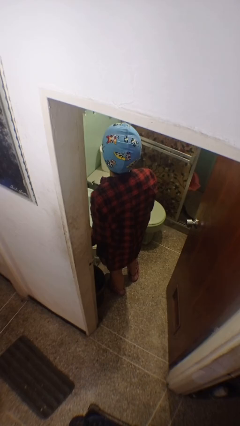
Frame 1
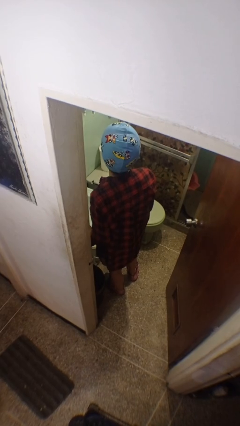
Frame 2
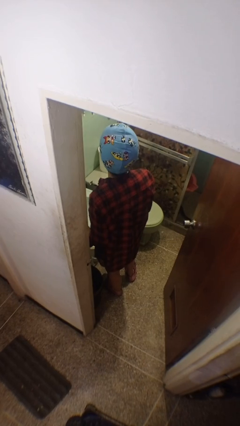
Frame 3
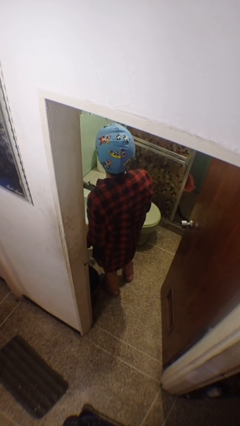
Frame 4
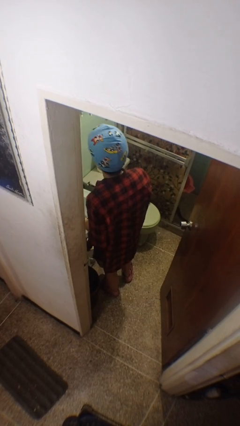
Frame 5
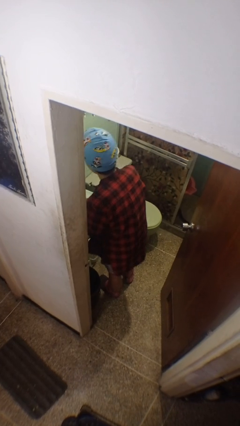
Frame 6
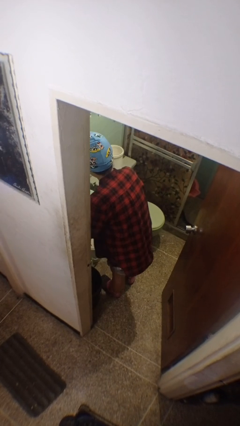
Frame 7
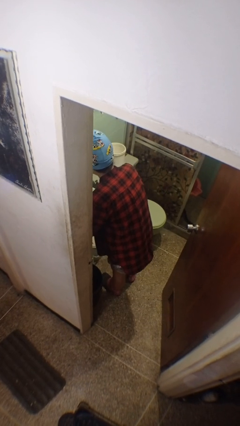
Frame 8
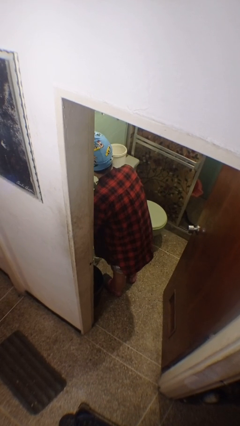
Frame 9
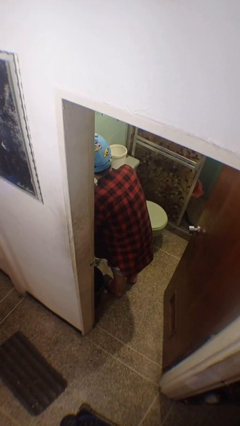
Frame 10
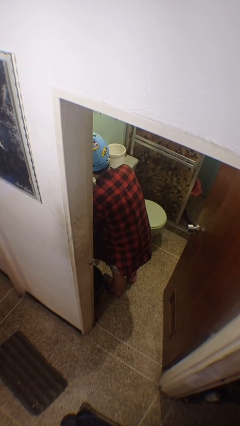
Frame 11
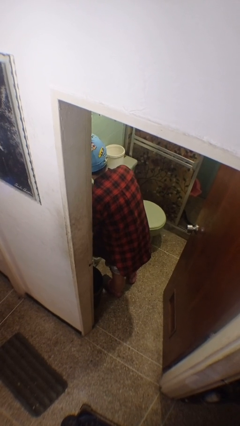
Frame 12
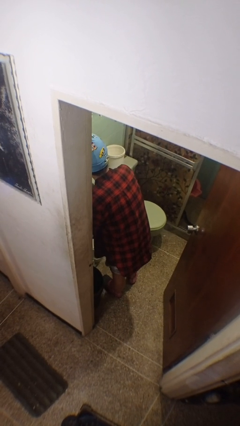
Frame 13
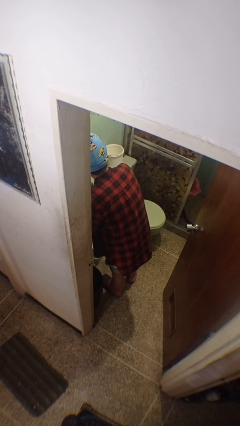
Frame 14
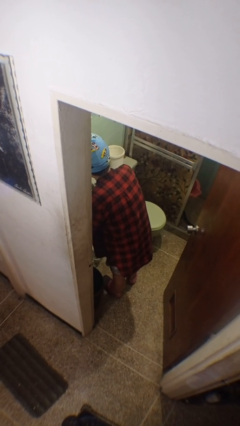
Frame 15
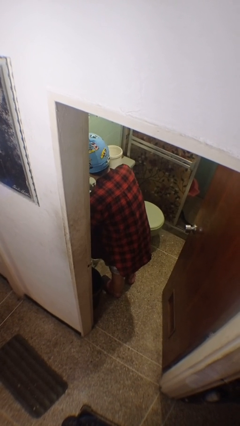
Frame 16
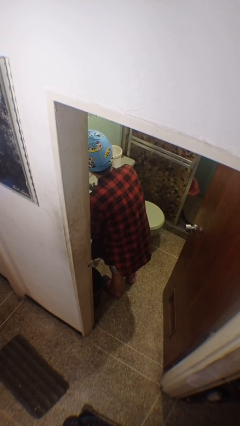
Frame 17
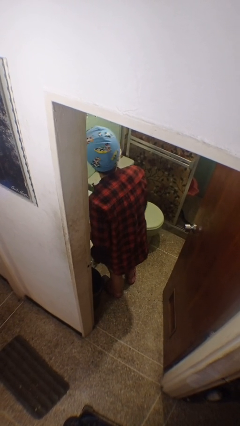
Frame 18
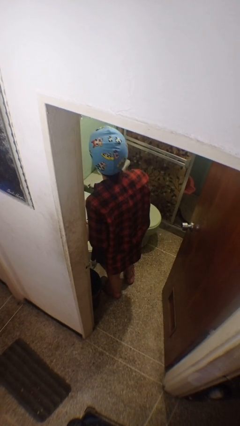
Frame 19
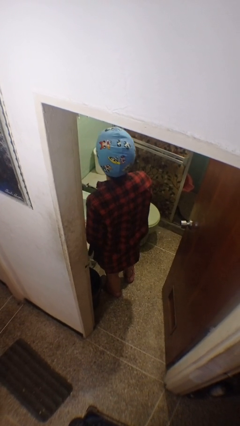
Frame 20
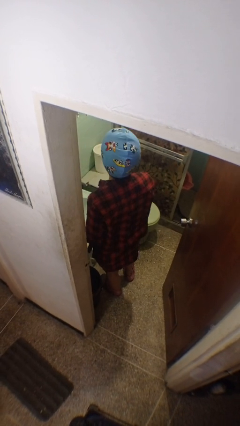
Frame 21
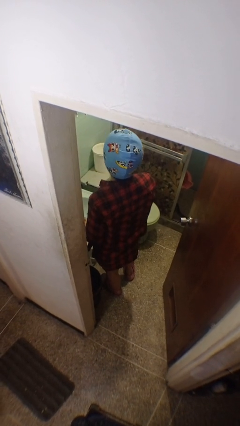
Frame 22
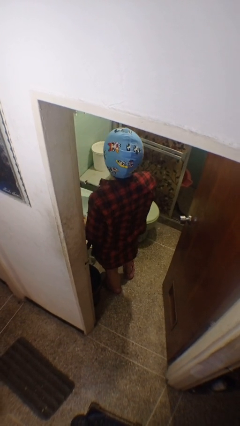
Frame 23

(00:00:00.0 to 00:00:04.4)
person washes hands

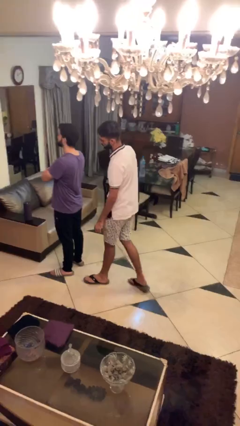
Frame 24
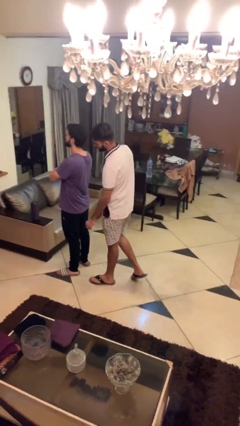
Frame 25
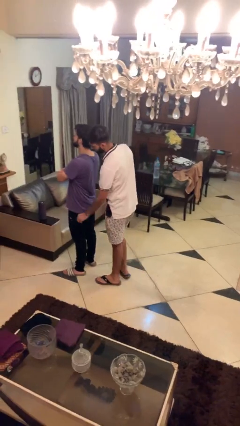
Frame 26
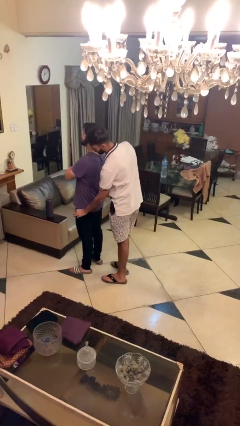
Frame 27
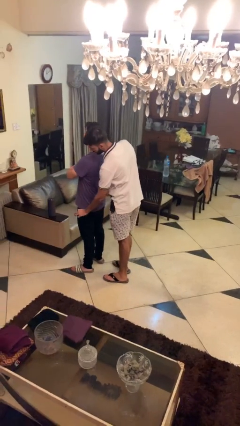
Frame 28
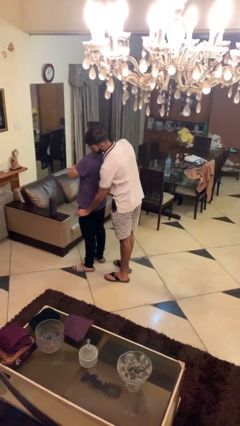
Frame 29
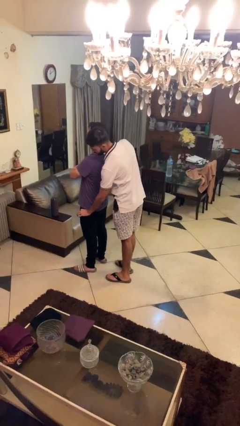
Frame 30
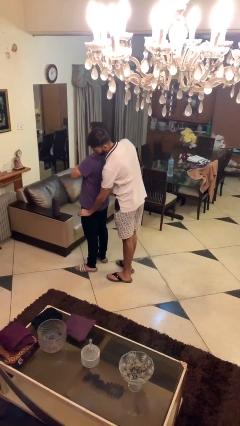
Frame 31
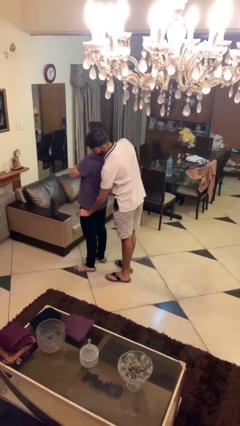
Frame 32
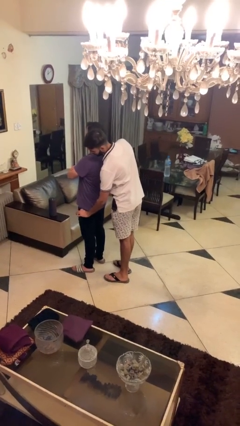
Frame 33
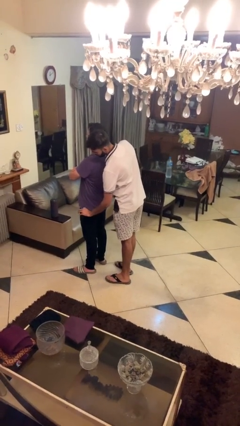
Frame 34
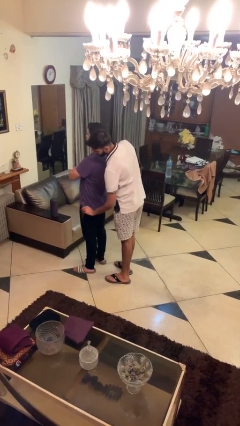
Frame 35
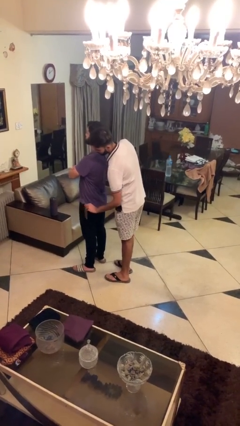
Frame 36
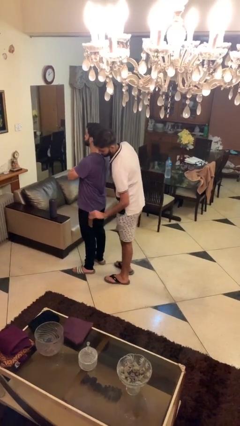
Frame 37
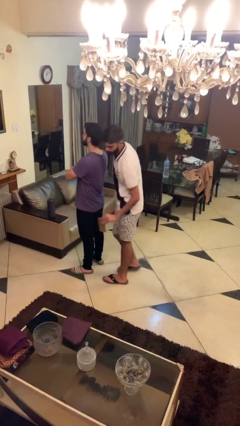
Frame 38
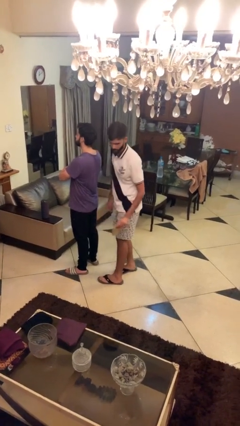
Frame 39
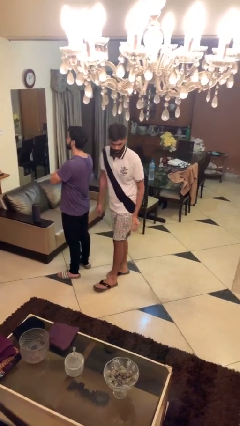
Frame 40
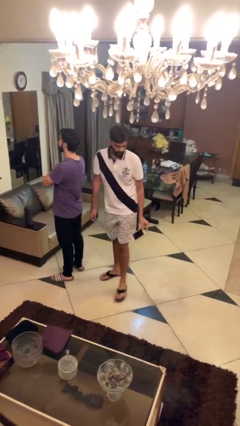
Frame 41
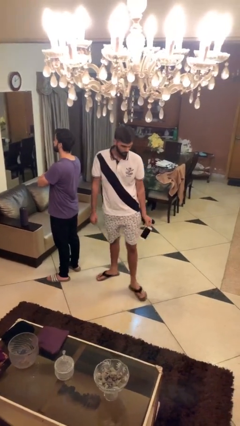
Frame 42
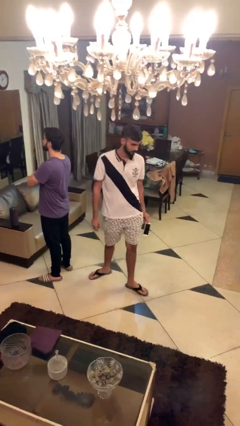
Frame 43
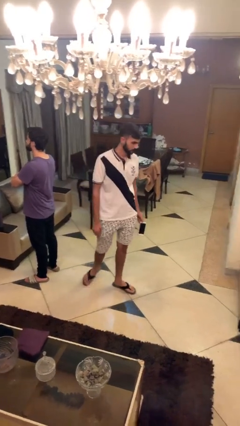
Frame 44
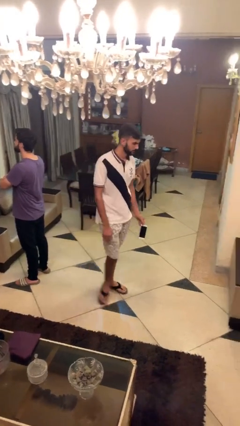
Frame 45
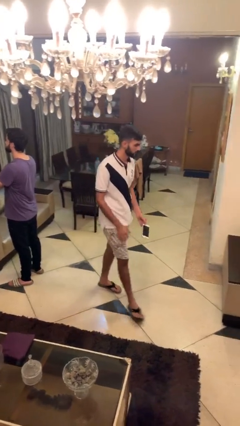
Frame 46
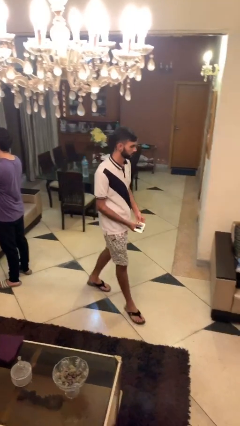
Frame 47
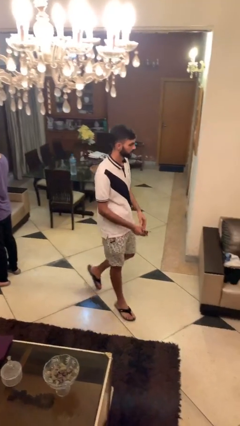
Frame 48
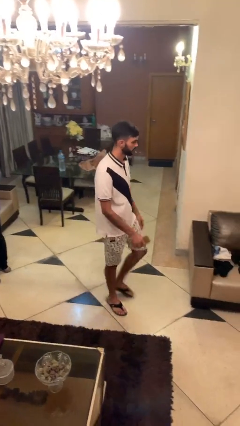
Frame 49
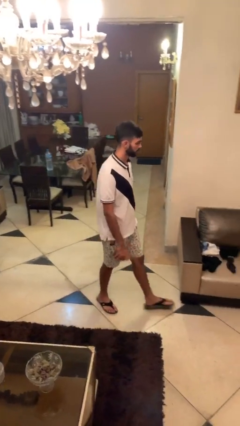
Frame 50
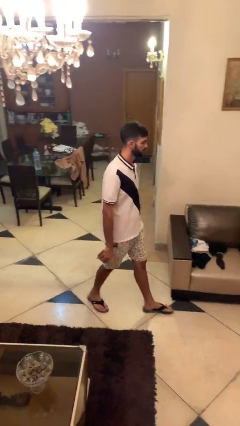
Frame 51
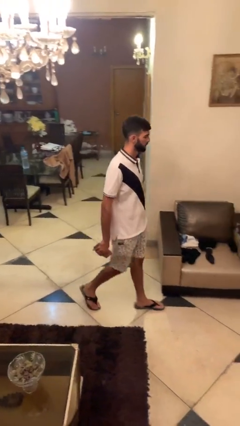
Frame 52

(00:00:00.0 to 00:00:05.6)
person steals object from person

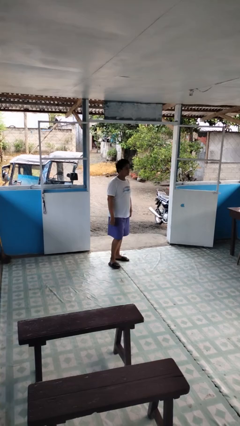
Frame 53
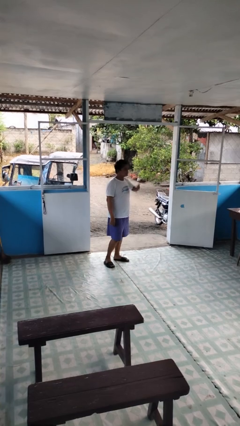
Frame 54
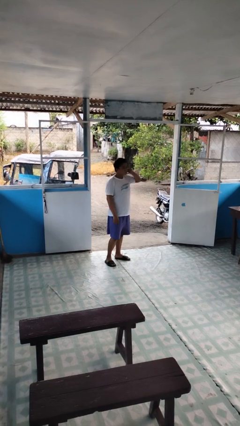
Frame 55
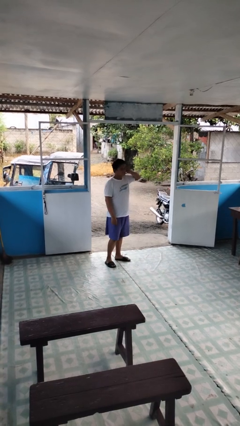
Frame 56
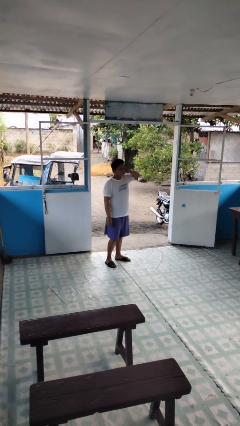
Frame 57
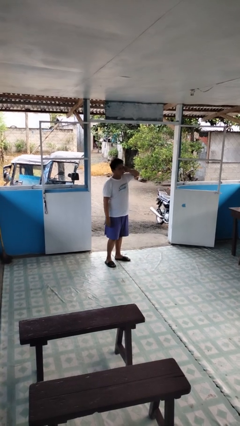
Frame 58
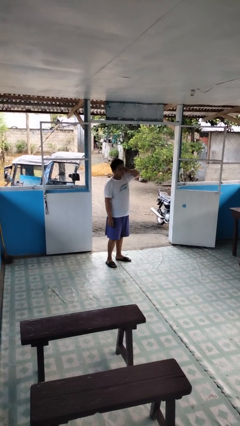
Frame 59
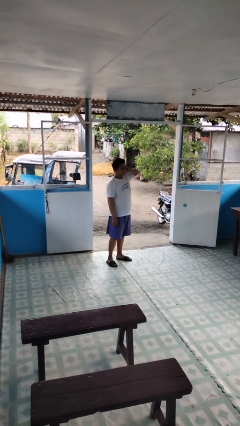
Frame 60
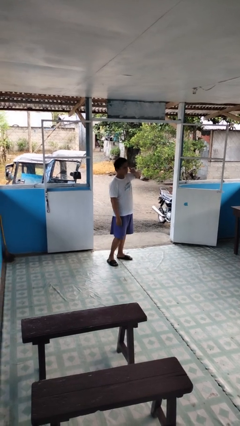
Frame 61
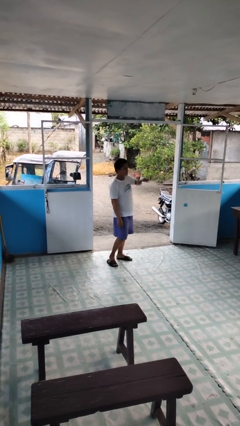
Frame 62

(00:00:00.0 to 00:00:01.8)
person gestures call me

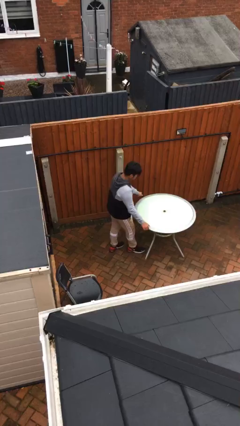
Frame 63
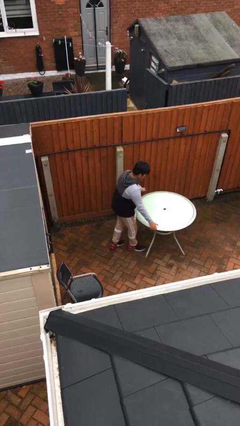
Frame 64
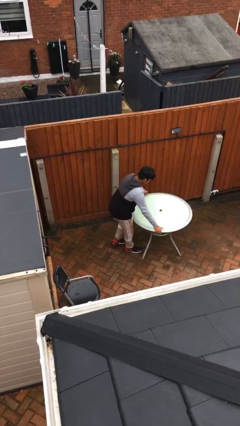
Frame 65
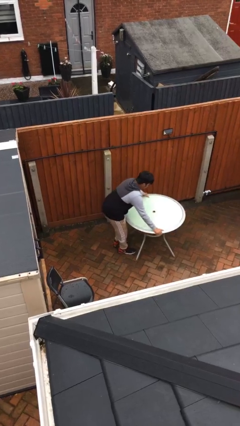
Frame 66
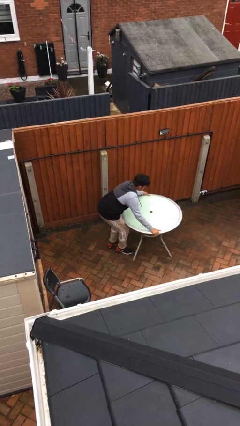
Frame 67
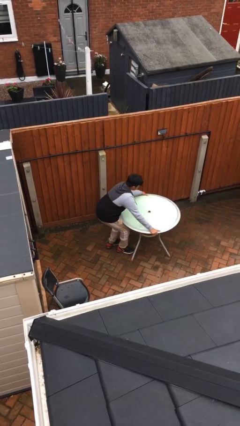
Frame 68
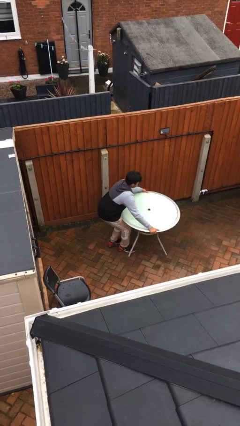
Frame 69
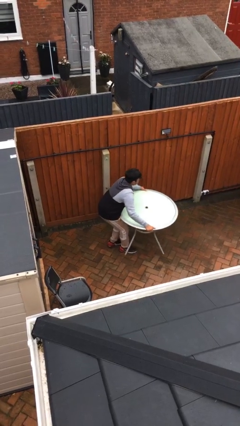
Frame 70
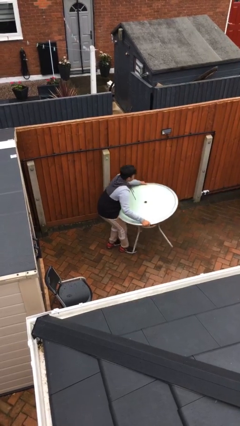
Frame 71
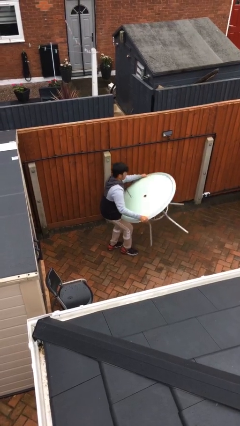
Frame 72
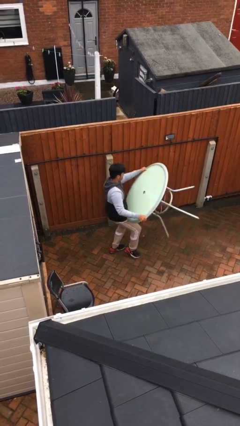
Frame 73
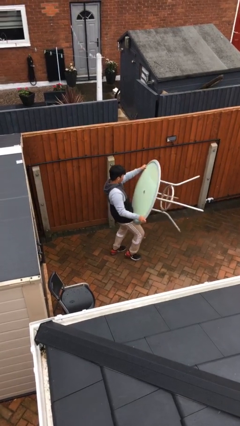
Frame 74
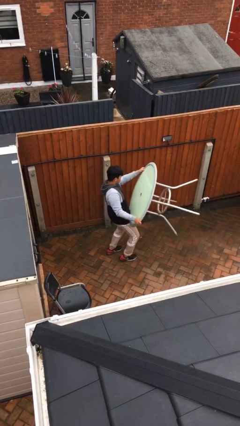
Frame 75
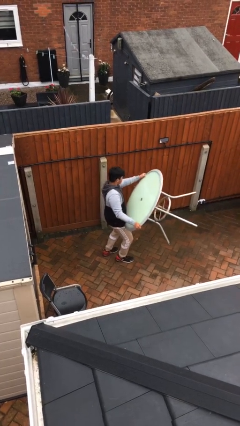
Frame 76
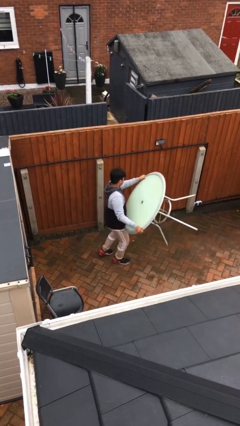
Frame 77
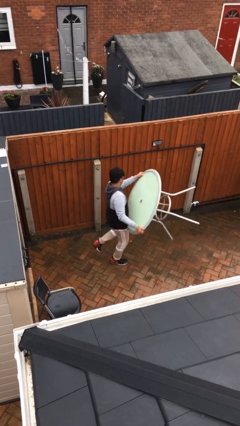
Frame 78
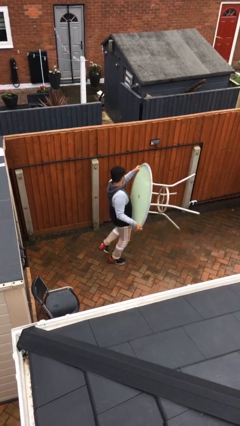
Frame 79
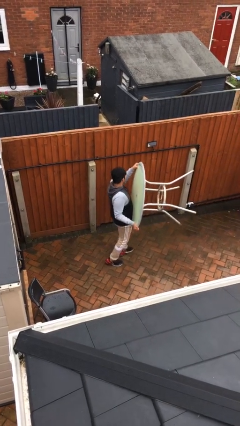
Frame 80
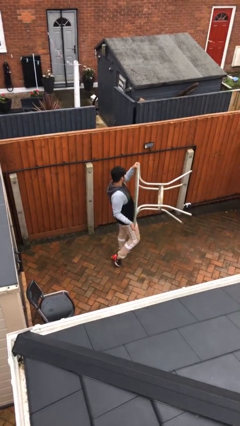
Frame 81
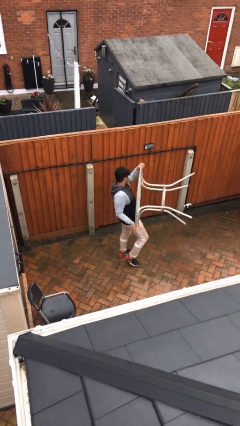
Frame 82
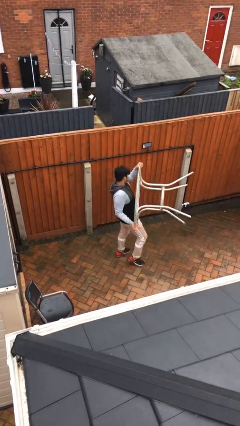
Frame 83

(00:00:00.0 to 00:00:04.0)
person picks up object from floor

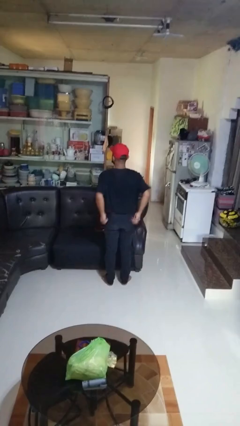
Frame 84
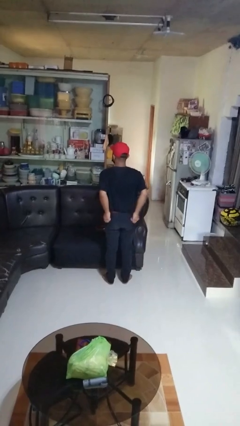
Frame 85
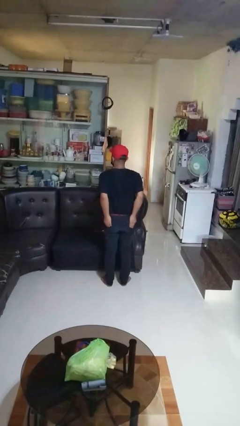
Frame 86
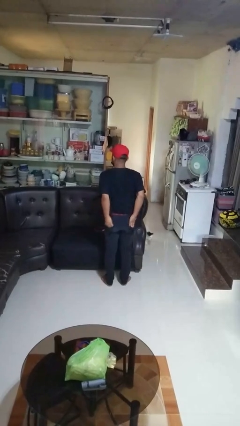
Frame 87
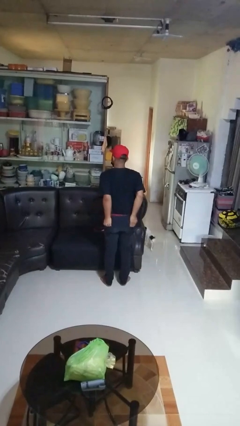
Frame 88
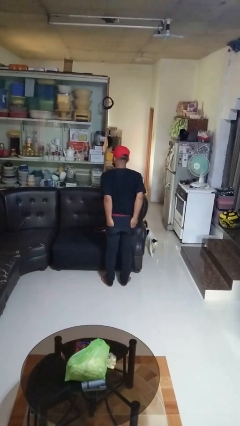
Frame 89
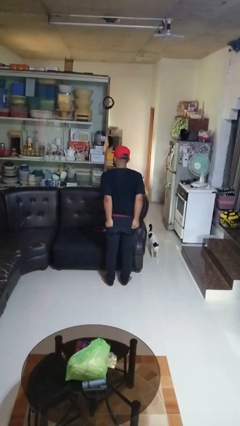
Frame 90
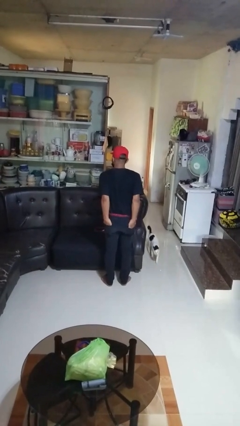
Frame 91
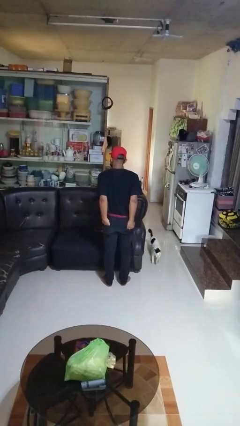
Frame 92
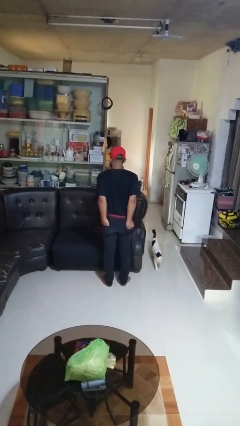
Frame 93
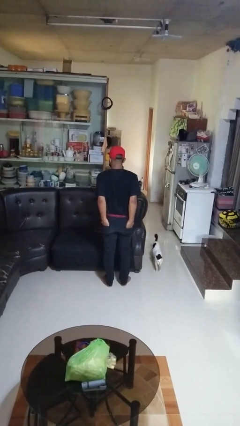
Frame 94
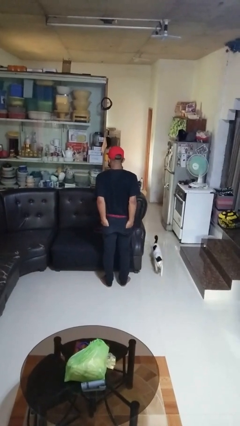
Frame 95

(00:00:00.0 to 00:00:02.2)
person puts hands in back pockets

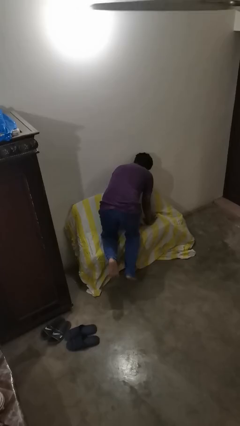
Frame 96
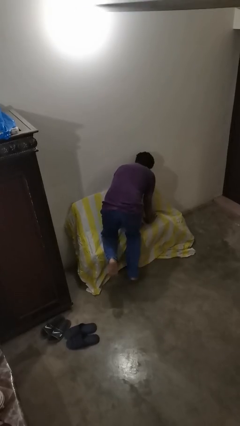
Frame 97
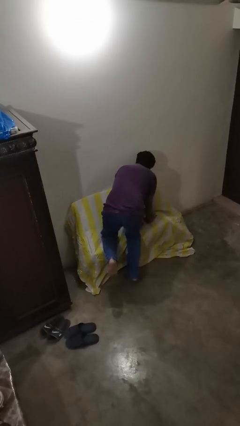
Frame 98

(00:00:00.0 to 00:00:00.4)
person stands up
